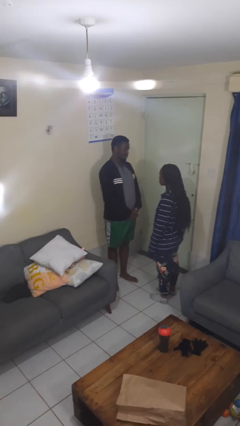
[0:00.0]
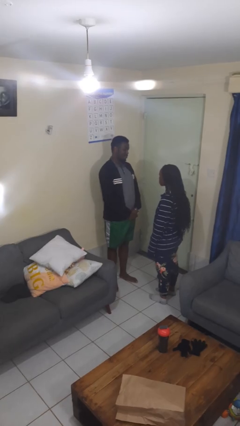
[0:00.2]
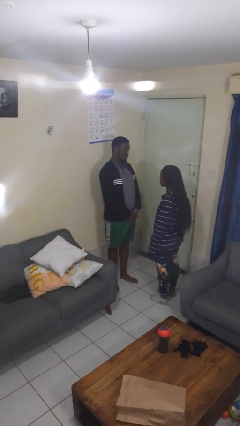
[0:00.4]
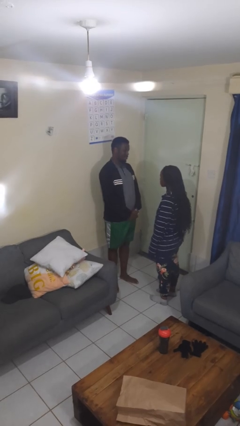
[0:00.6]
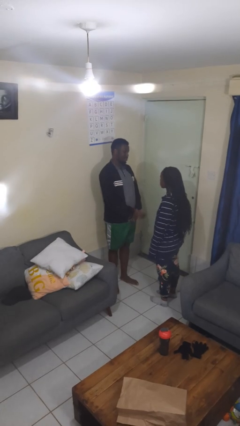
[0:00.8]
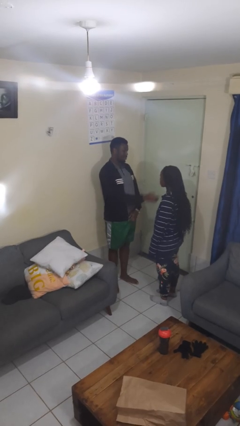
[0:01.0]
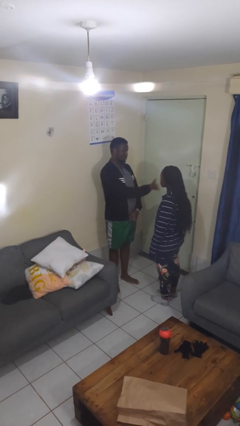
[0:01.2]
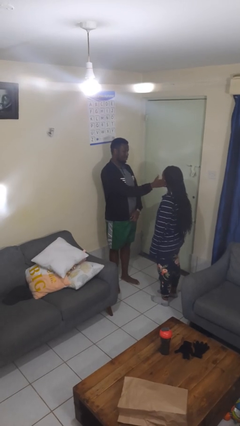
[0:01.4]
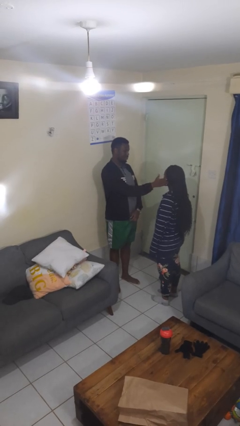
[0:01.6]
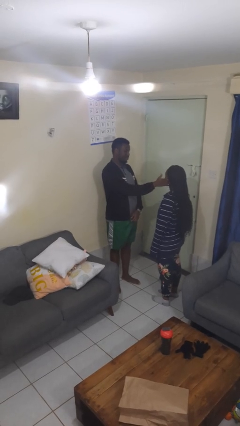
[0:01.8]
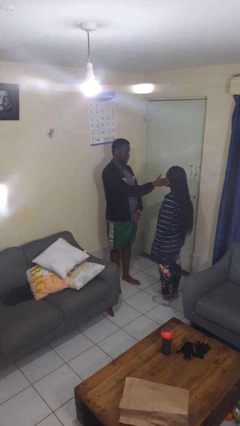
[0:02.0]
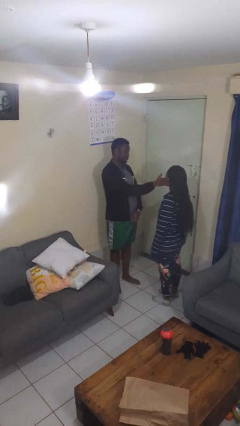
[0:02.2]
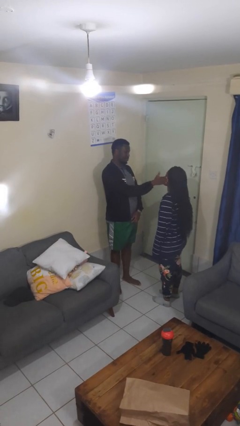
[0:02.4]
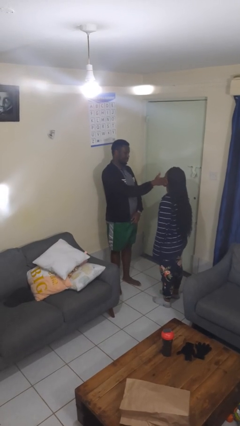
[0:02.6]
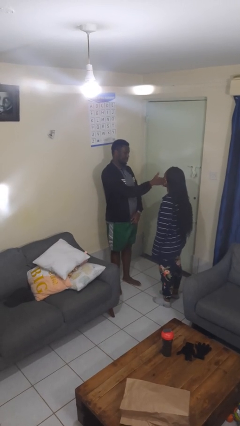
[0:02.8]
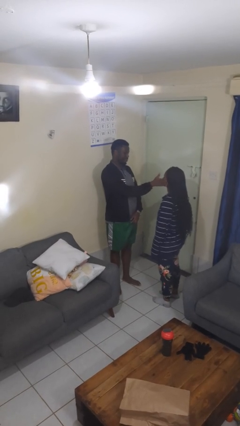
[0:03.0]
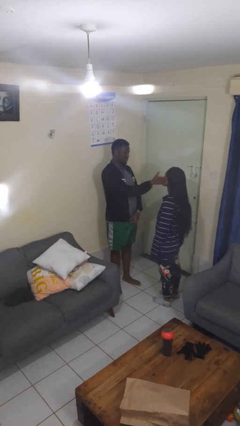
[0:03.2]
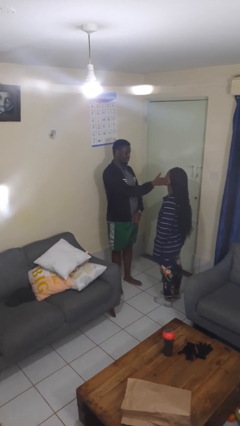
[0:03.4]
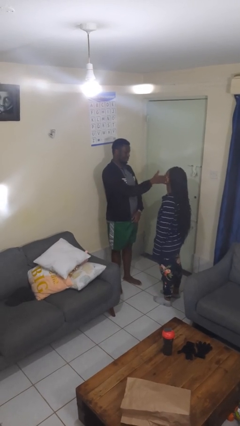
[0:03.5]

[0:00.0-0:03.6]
person touches face of person

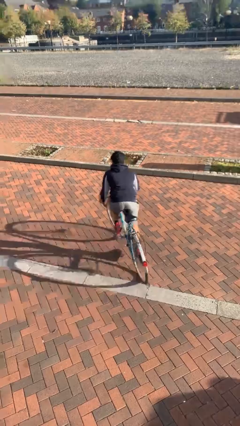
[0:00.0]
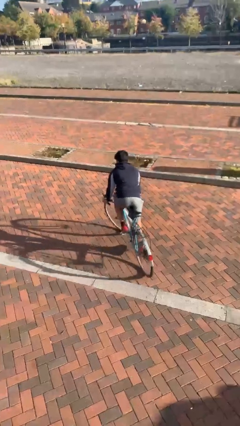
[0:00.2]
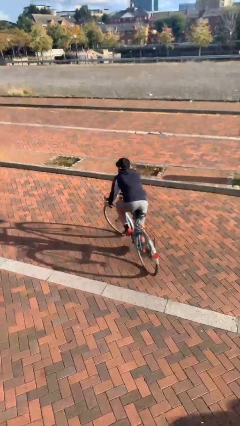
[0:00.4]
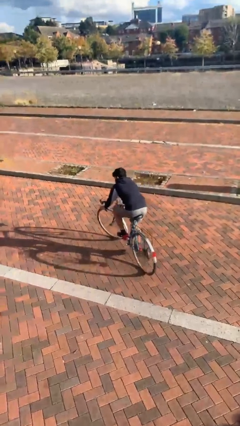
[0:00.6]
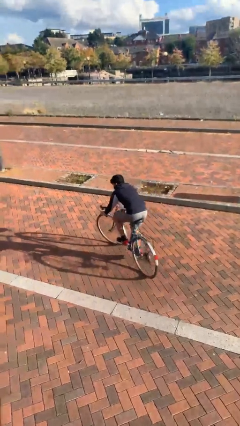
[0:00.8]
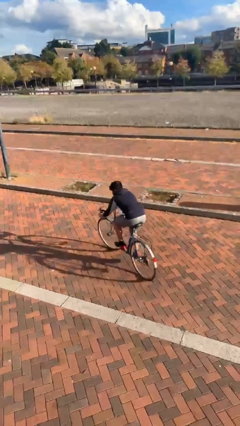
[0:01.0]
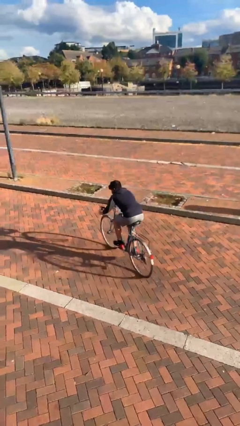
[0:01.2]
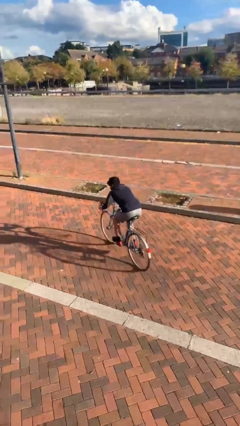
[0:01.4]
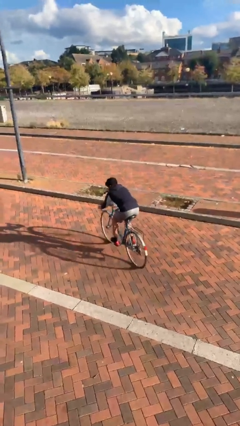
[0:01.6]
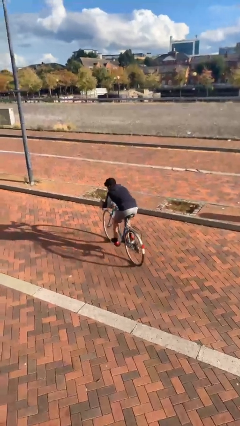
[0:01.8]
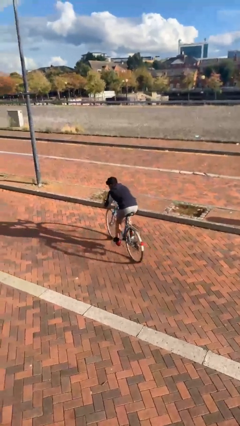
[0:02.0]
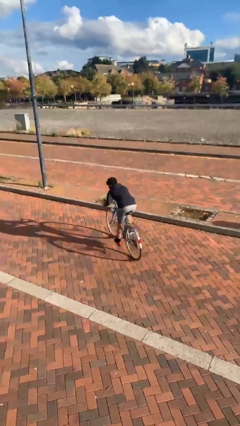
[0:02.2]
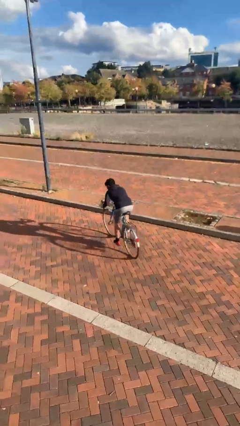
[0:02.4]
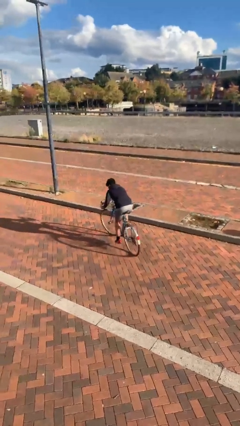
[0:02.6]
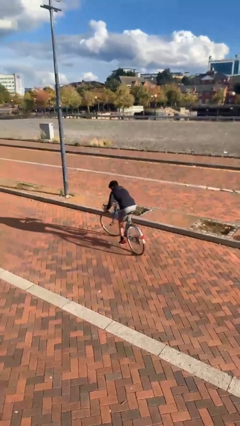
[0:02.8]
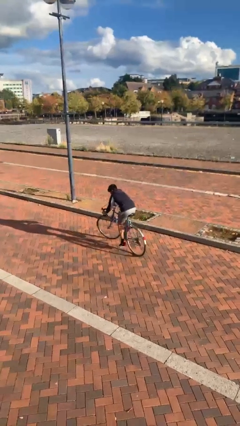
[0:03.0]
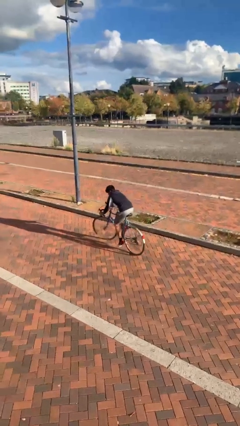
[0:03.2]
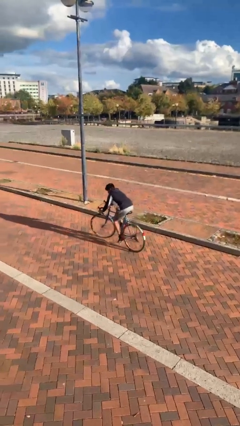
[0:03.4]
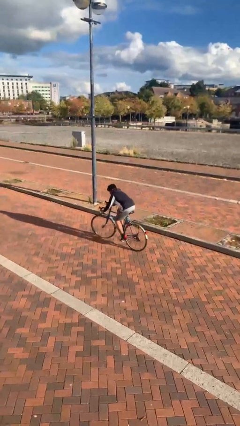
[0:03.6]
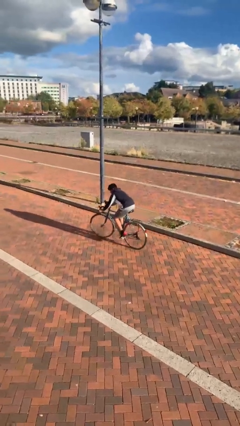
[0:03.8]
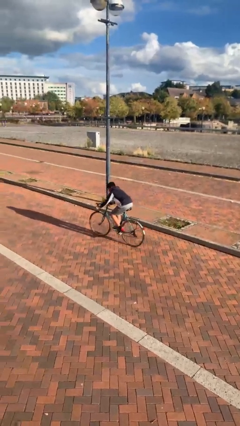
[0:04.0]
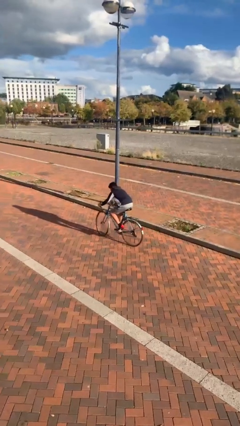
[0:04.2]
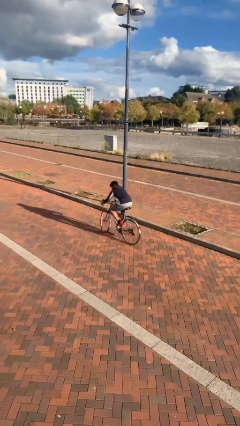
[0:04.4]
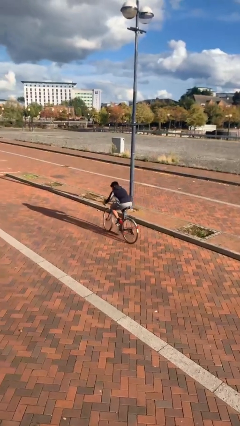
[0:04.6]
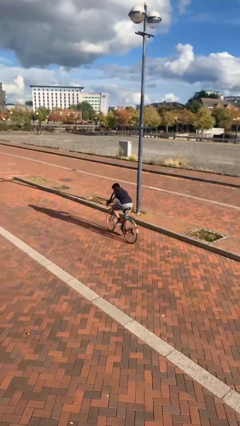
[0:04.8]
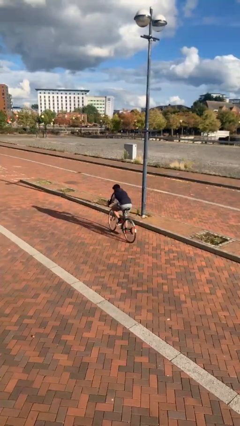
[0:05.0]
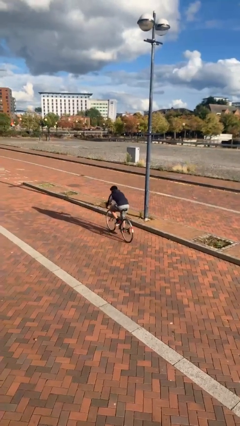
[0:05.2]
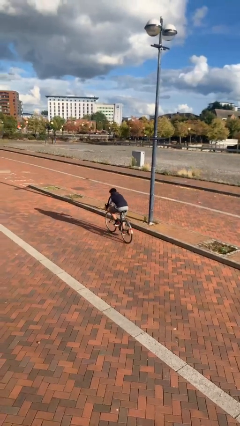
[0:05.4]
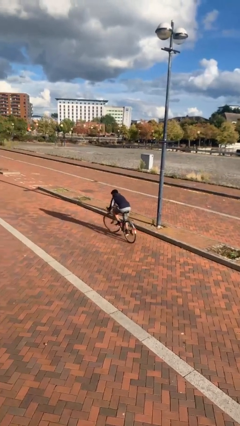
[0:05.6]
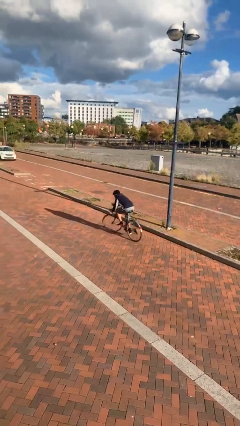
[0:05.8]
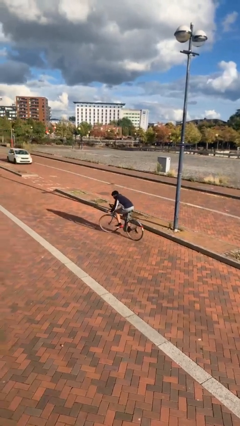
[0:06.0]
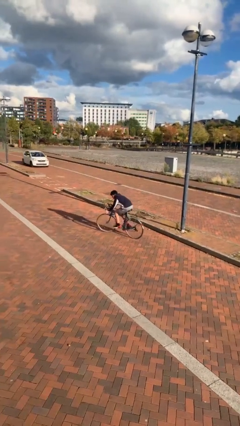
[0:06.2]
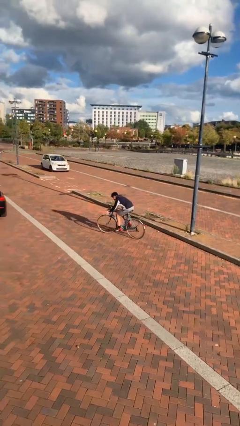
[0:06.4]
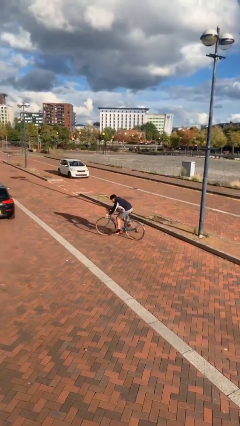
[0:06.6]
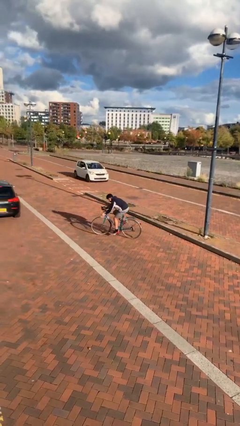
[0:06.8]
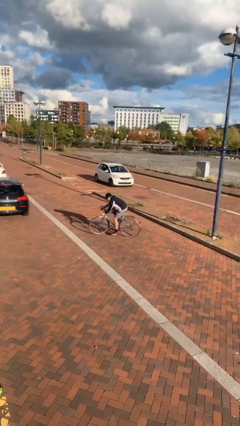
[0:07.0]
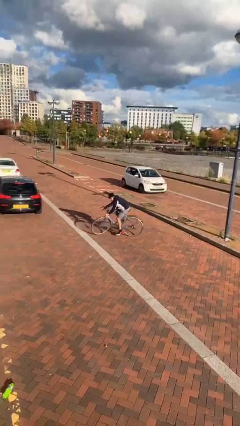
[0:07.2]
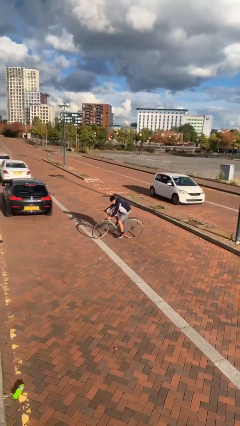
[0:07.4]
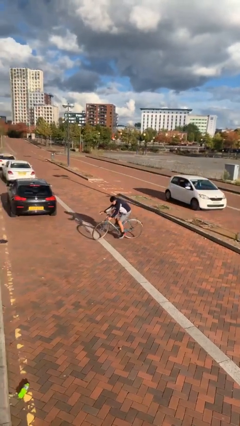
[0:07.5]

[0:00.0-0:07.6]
person rides bicycle

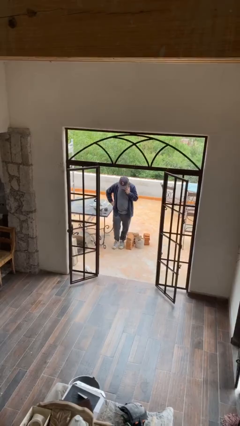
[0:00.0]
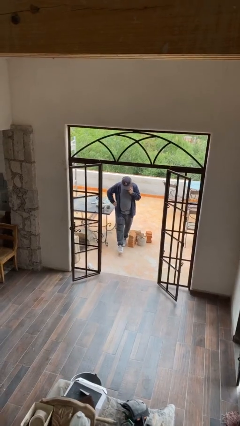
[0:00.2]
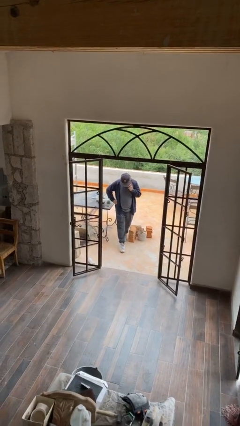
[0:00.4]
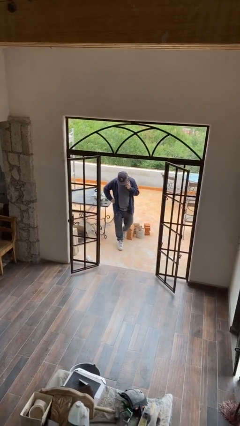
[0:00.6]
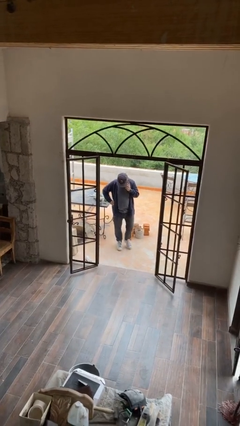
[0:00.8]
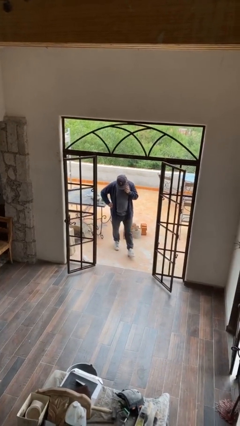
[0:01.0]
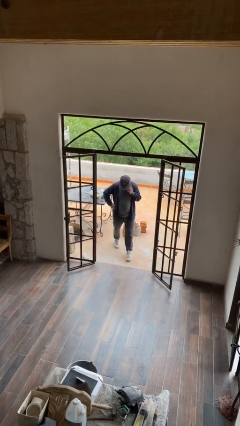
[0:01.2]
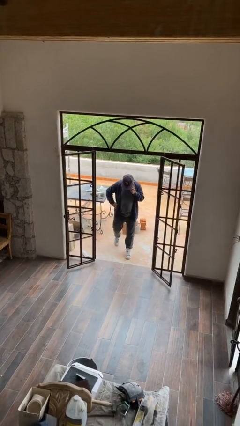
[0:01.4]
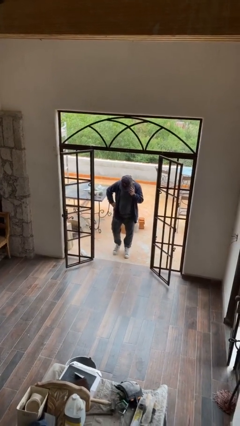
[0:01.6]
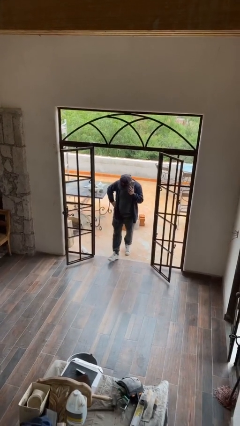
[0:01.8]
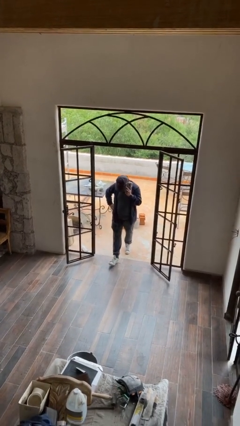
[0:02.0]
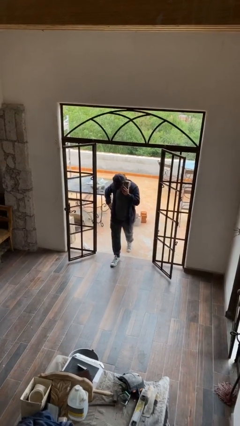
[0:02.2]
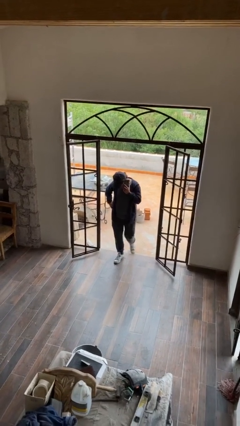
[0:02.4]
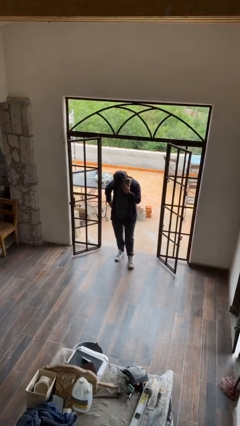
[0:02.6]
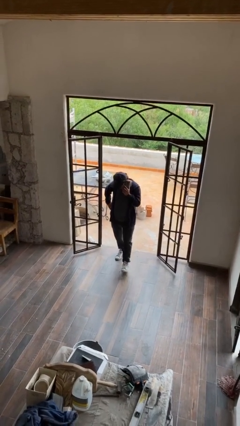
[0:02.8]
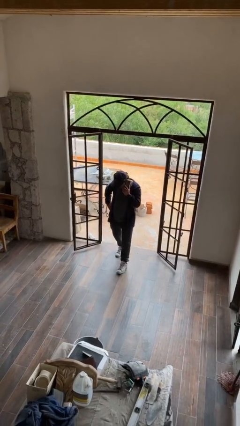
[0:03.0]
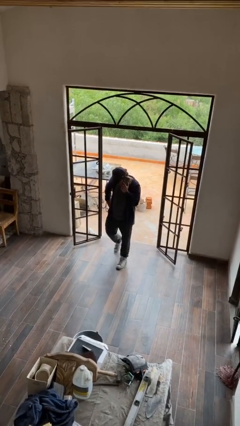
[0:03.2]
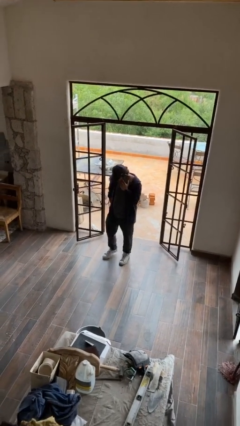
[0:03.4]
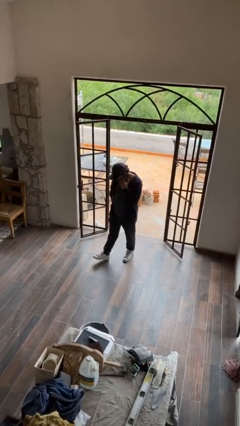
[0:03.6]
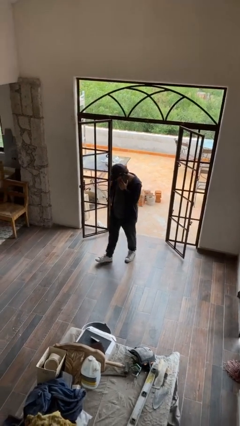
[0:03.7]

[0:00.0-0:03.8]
person enters scene through structure

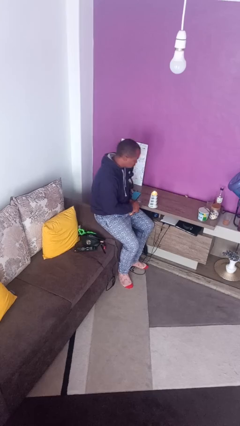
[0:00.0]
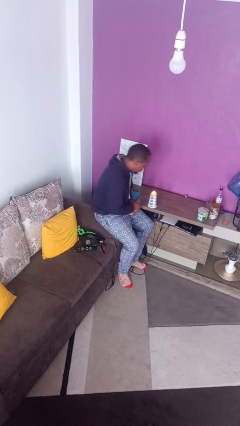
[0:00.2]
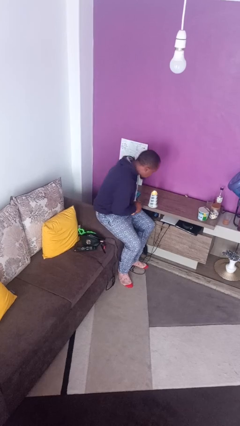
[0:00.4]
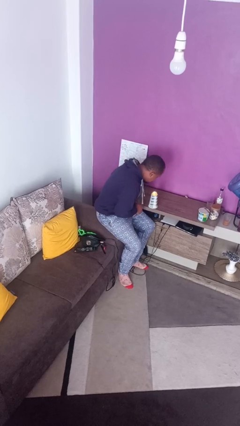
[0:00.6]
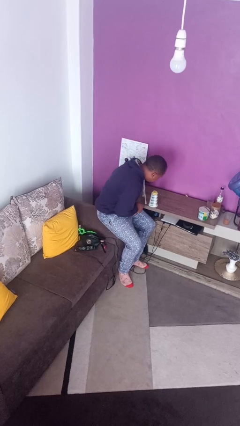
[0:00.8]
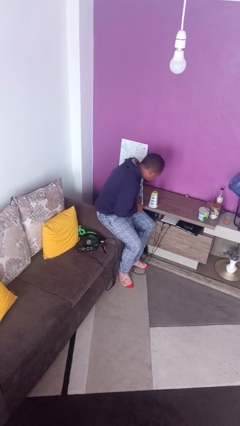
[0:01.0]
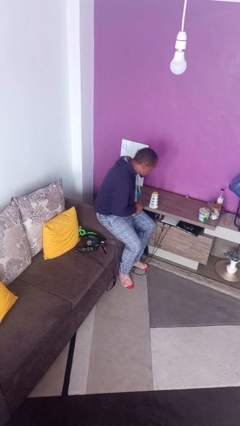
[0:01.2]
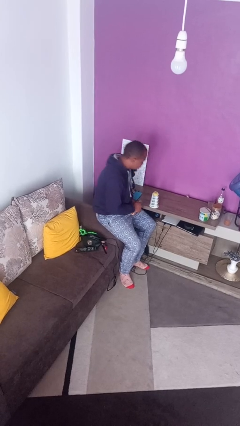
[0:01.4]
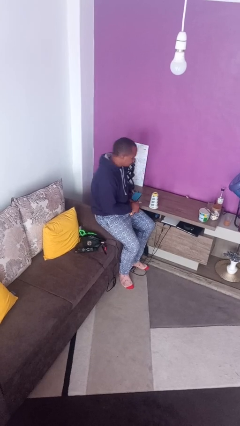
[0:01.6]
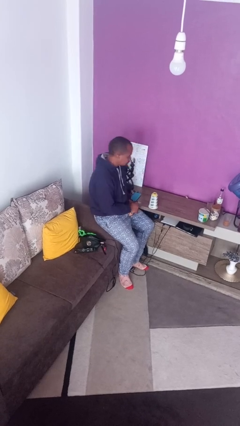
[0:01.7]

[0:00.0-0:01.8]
person extinguishes candle

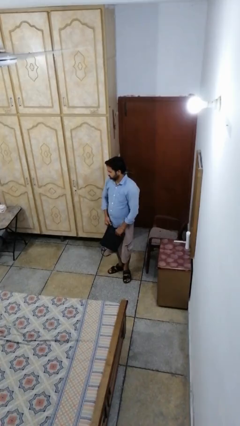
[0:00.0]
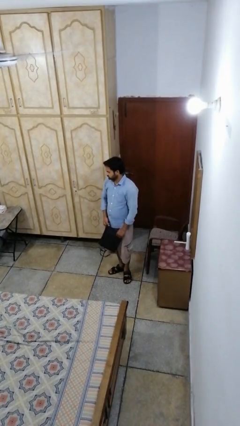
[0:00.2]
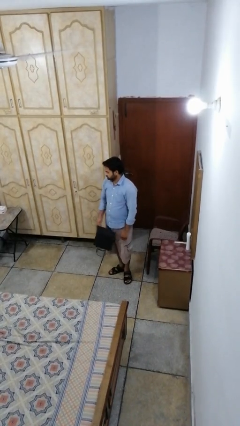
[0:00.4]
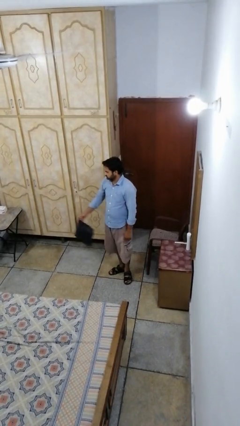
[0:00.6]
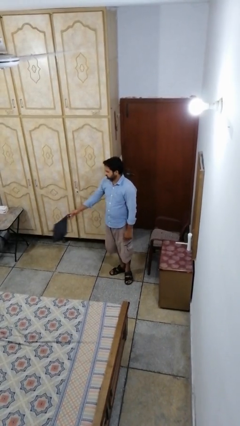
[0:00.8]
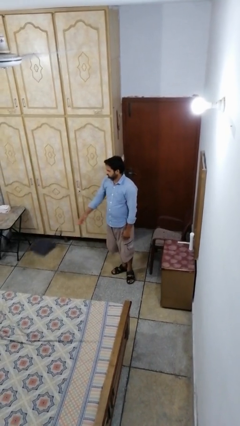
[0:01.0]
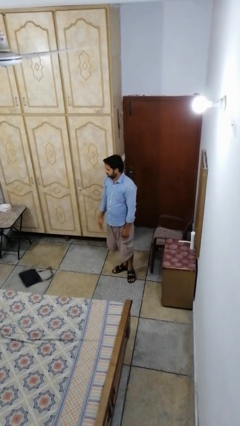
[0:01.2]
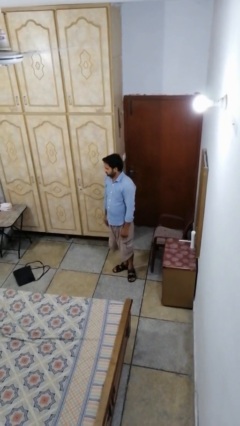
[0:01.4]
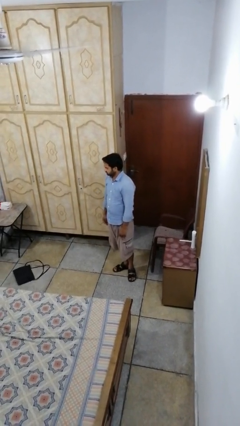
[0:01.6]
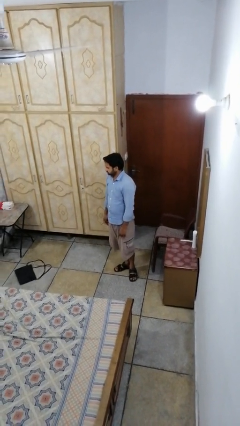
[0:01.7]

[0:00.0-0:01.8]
person throws object to ground
